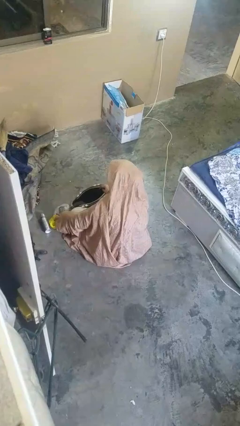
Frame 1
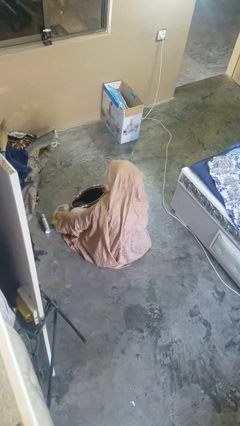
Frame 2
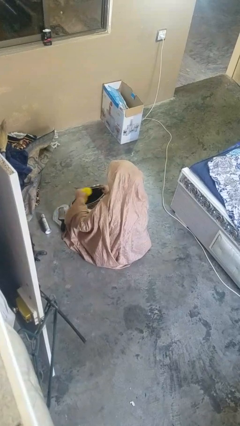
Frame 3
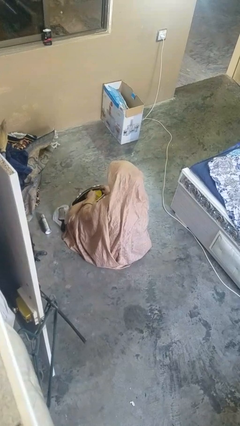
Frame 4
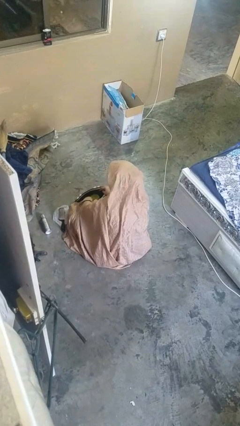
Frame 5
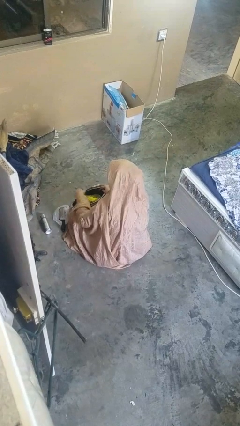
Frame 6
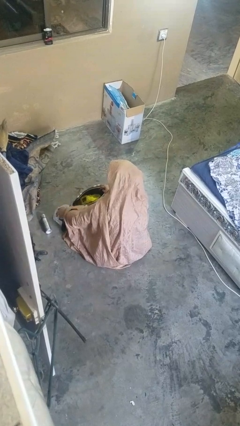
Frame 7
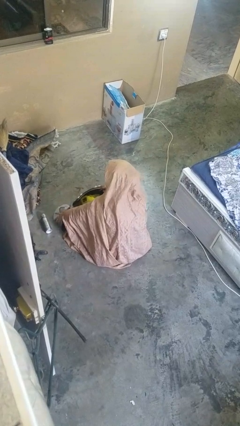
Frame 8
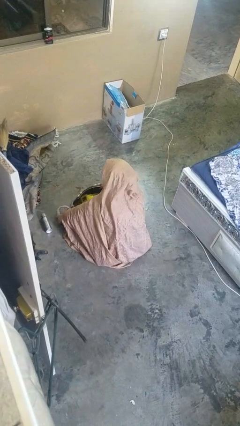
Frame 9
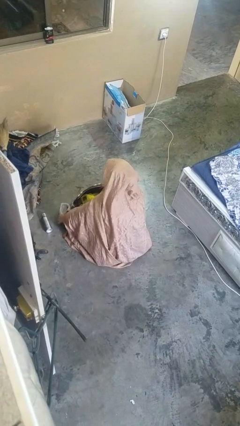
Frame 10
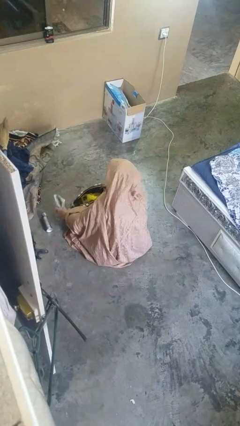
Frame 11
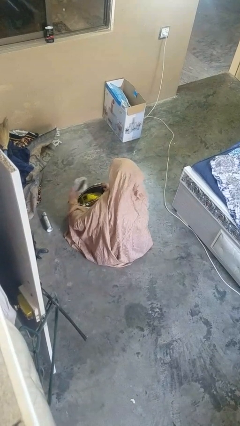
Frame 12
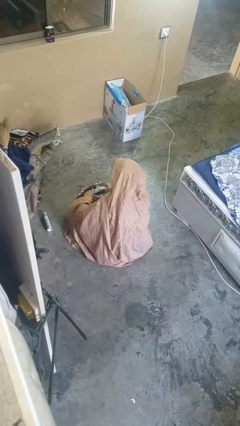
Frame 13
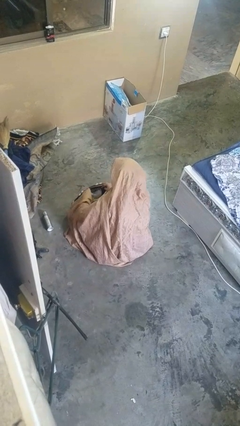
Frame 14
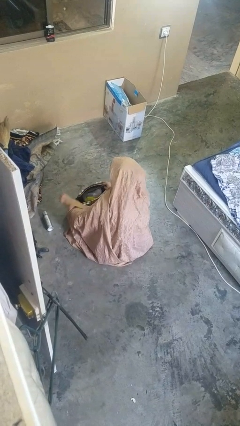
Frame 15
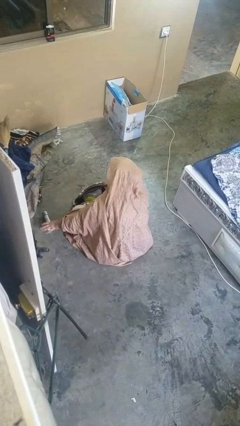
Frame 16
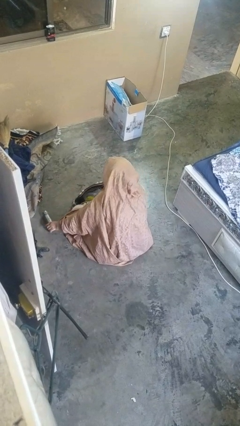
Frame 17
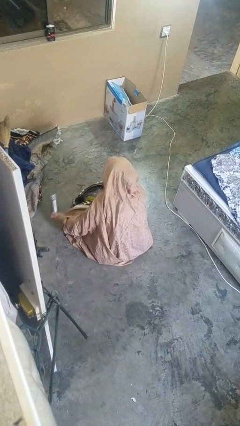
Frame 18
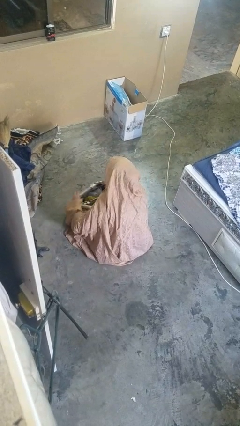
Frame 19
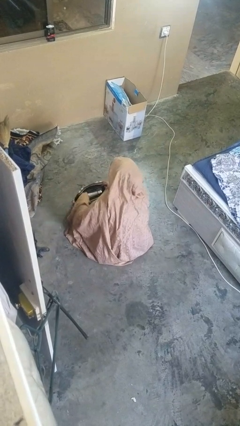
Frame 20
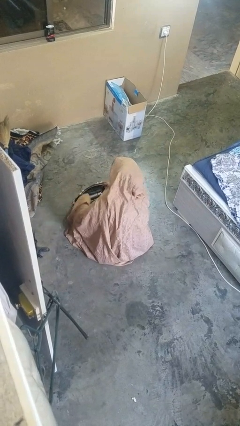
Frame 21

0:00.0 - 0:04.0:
person puts object into purse

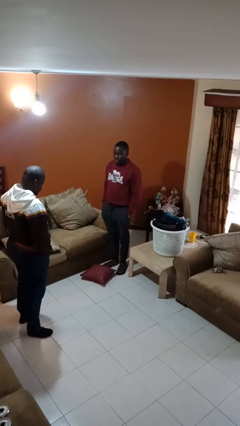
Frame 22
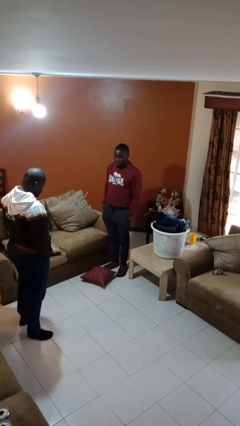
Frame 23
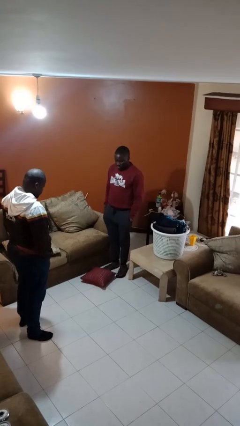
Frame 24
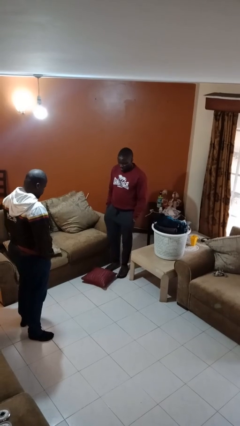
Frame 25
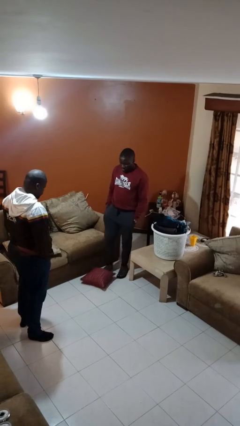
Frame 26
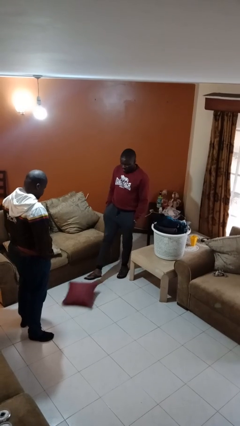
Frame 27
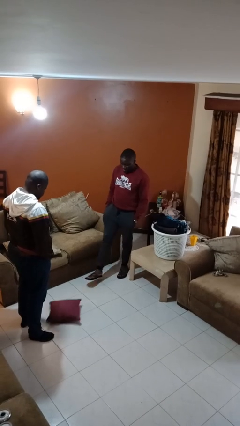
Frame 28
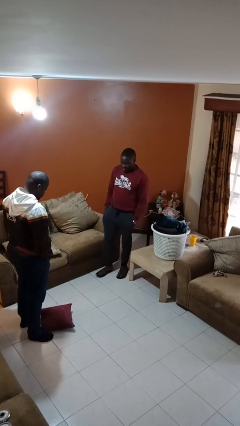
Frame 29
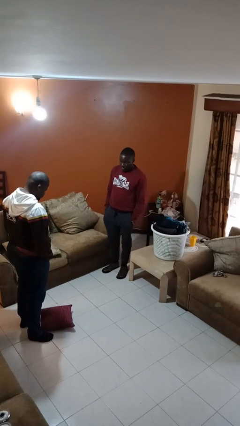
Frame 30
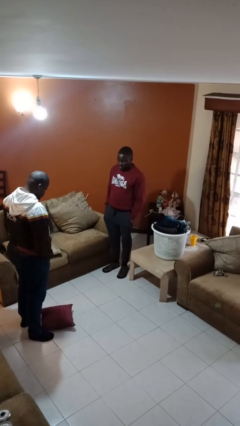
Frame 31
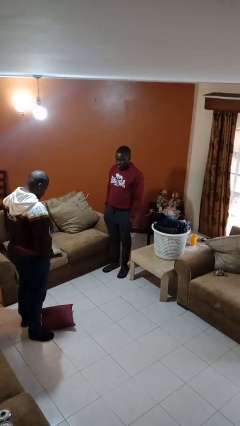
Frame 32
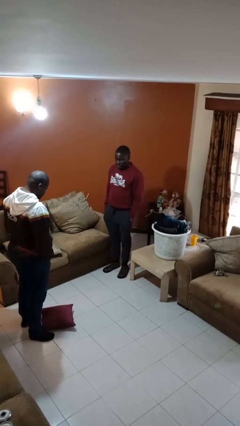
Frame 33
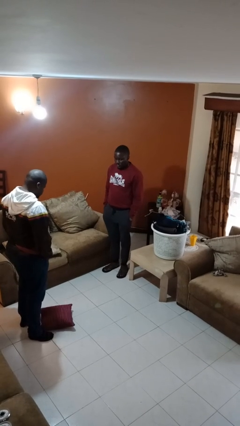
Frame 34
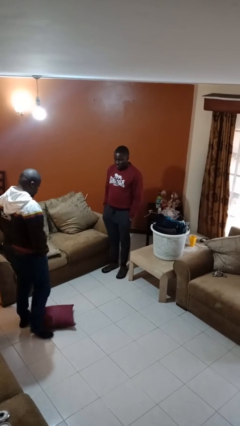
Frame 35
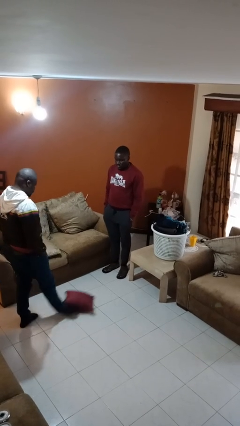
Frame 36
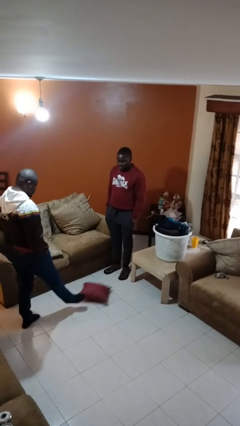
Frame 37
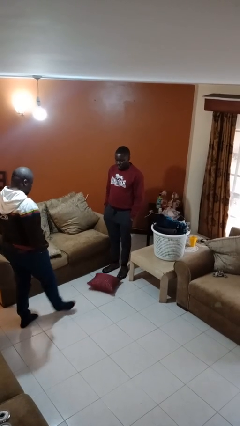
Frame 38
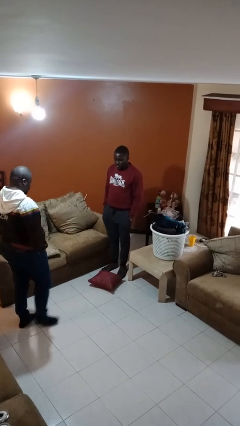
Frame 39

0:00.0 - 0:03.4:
person kicks object to person

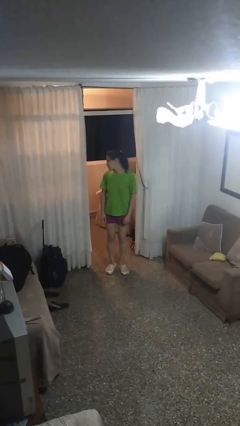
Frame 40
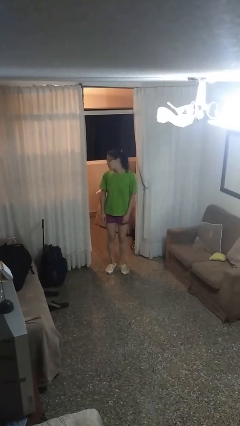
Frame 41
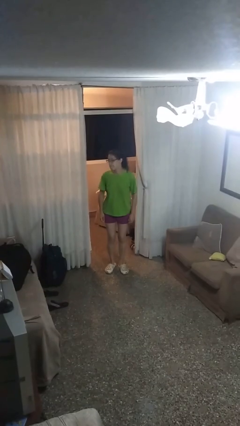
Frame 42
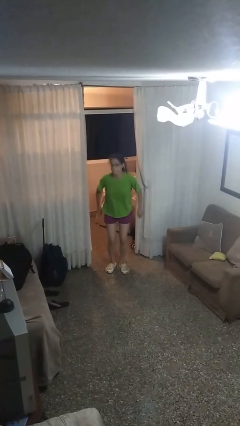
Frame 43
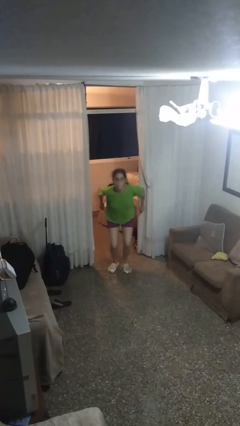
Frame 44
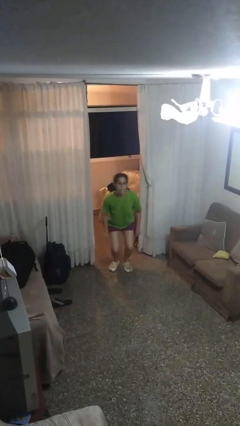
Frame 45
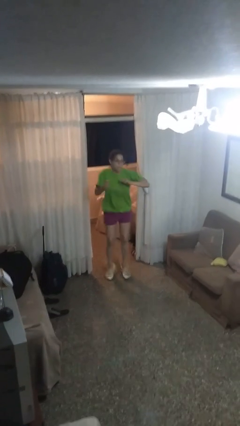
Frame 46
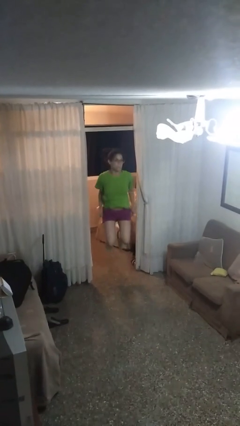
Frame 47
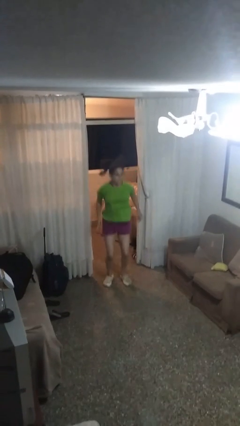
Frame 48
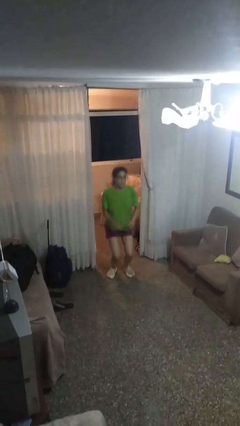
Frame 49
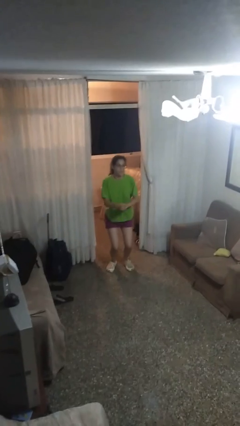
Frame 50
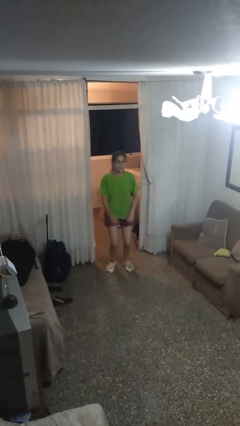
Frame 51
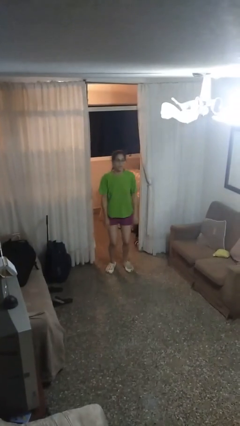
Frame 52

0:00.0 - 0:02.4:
person jumps

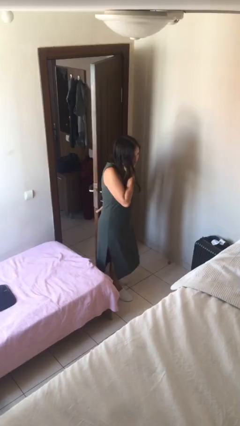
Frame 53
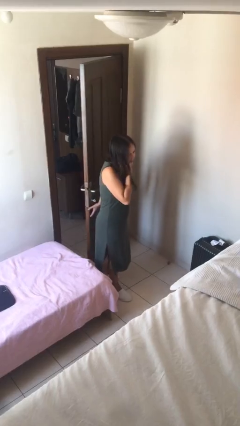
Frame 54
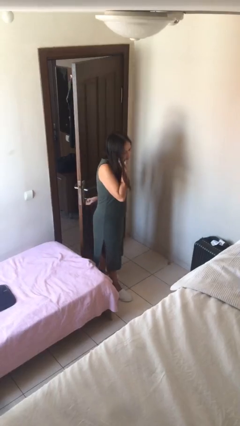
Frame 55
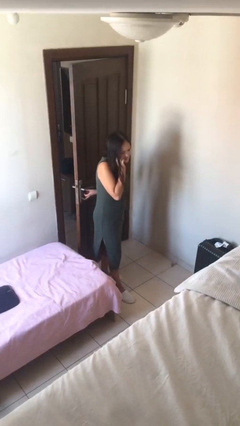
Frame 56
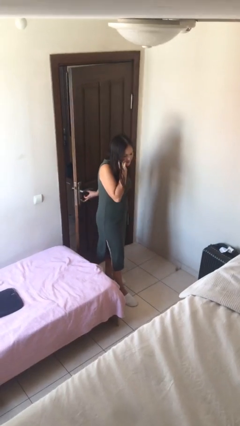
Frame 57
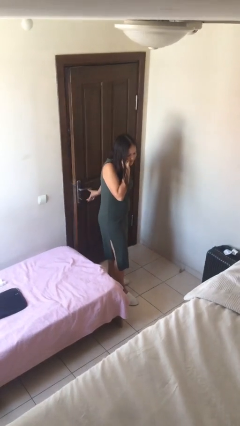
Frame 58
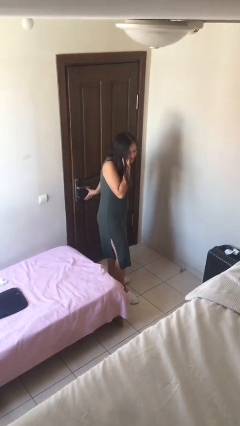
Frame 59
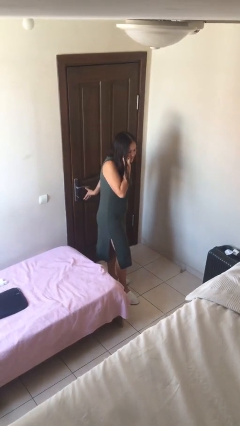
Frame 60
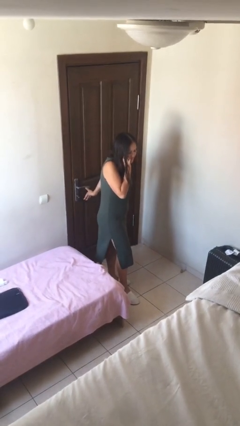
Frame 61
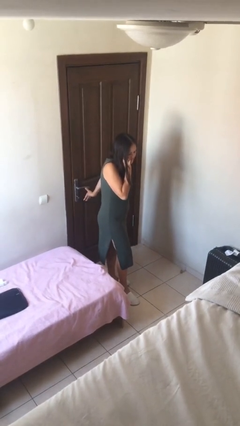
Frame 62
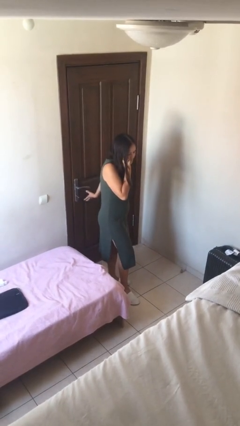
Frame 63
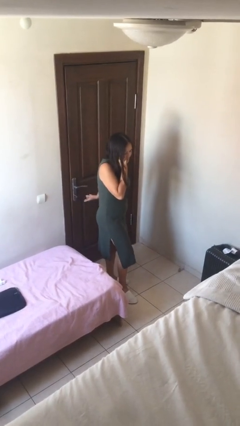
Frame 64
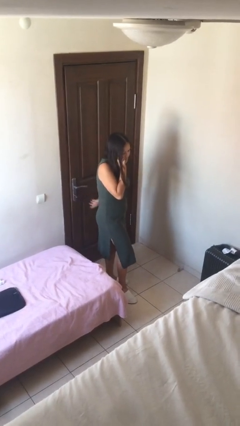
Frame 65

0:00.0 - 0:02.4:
person closes facility door

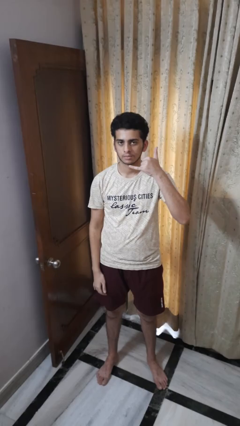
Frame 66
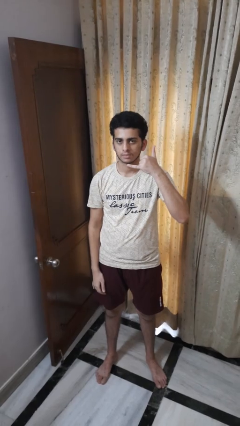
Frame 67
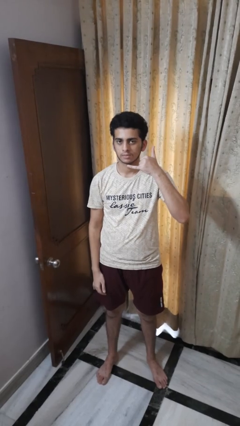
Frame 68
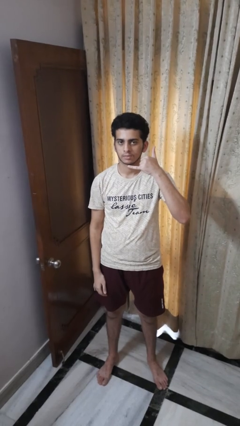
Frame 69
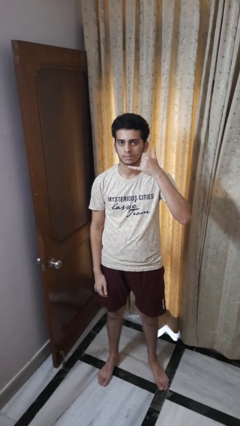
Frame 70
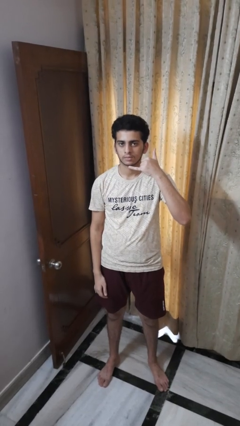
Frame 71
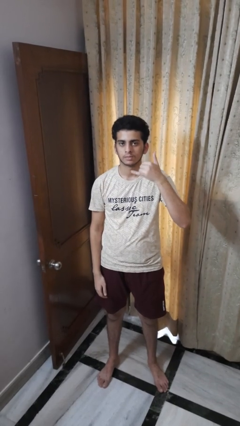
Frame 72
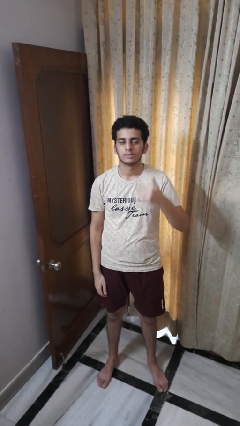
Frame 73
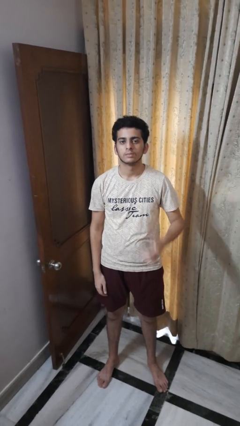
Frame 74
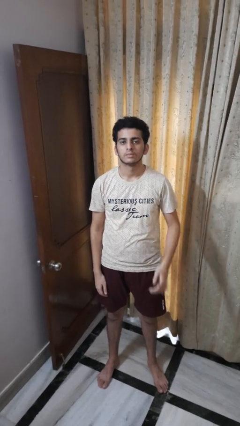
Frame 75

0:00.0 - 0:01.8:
person gestures call me

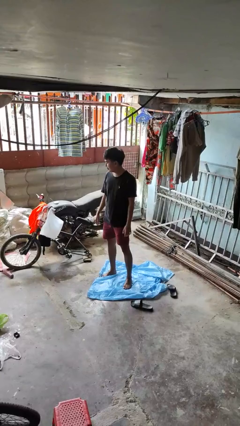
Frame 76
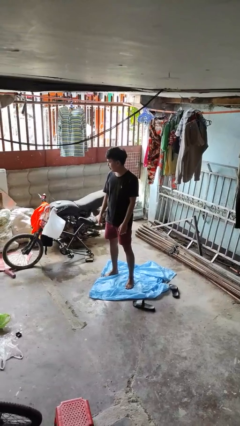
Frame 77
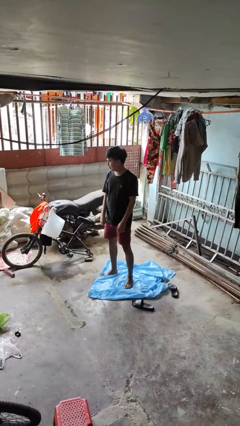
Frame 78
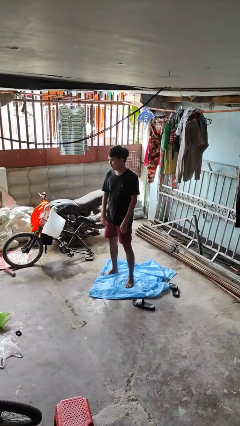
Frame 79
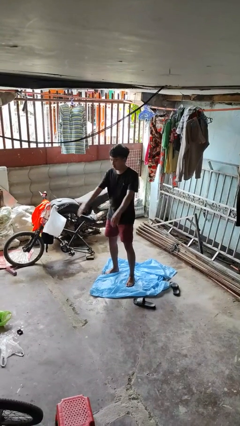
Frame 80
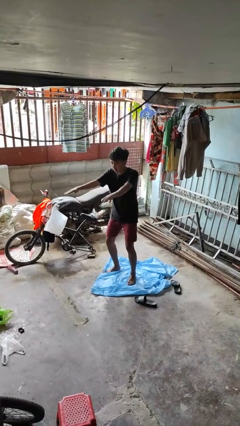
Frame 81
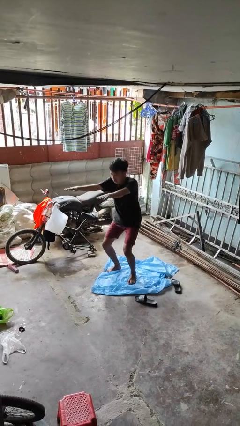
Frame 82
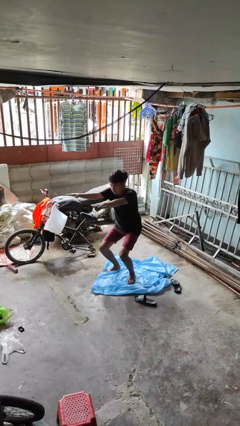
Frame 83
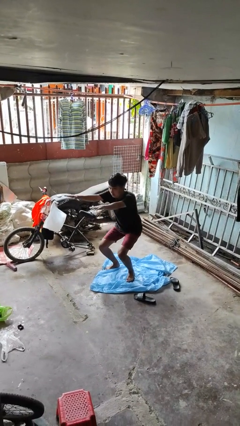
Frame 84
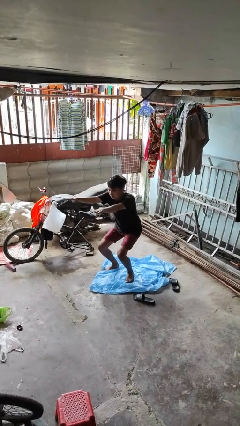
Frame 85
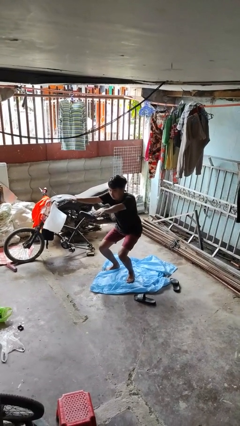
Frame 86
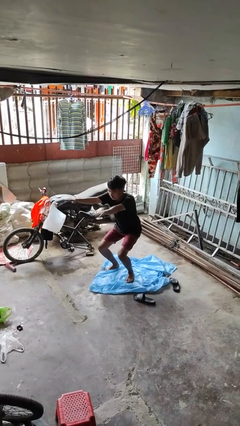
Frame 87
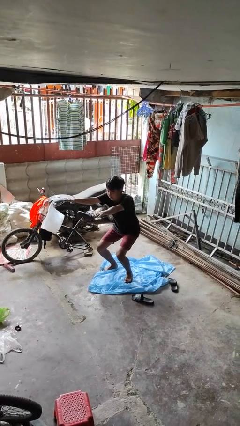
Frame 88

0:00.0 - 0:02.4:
person squats

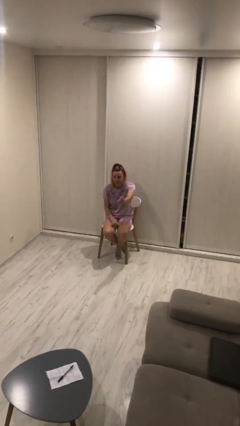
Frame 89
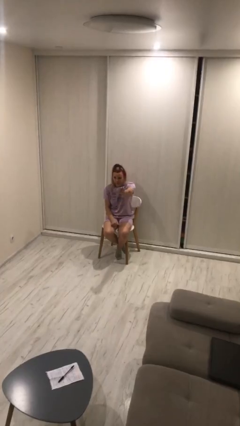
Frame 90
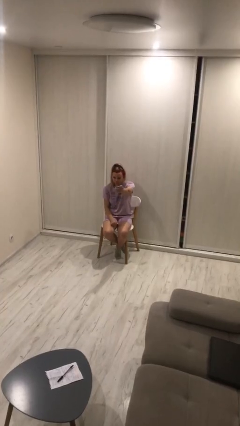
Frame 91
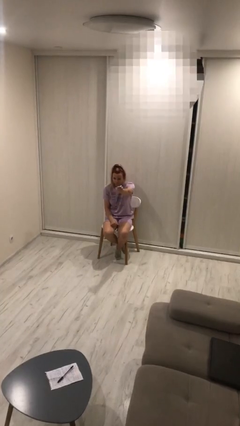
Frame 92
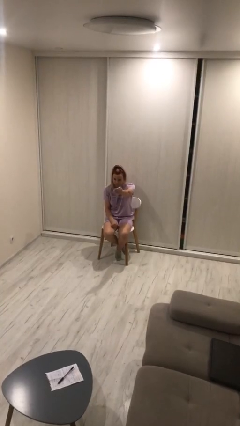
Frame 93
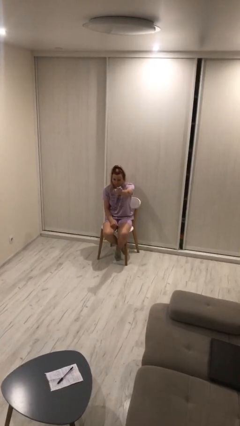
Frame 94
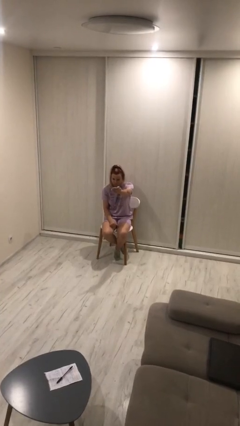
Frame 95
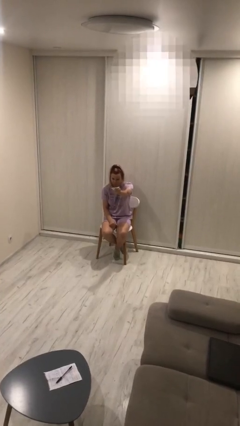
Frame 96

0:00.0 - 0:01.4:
person gestures come here
